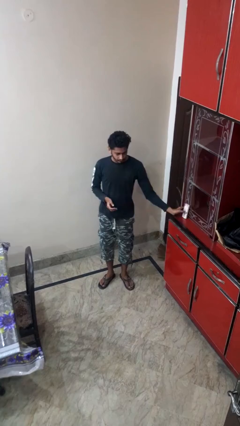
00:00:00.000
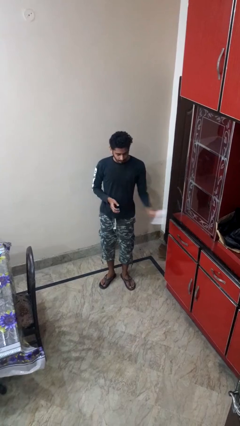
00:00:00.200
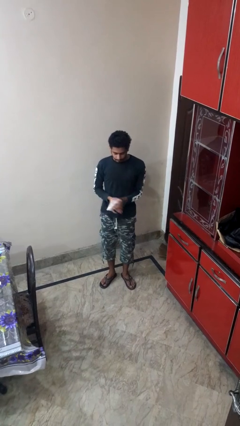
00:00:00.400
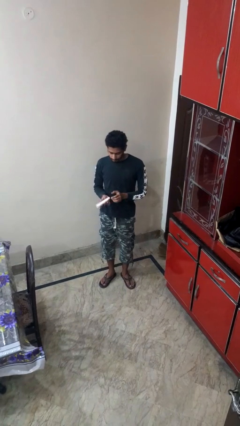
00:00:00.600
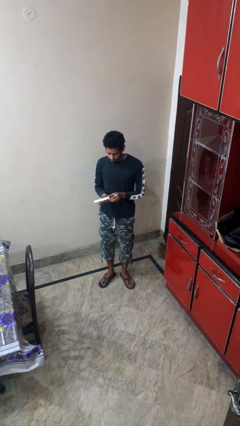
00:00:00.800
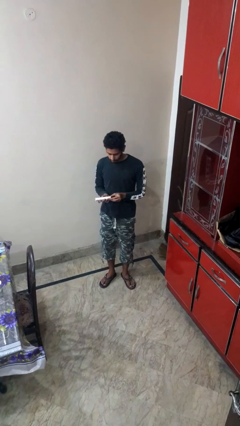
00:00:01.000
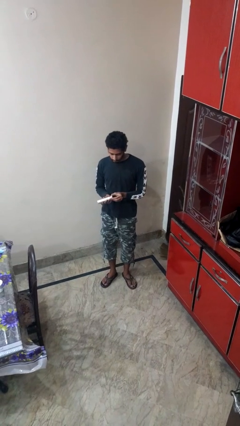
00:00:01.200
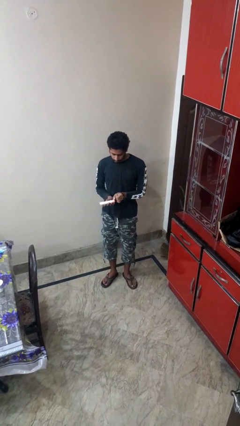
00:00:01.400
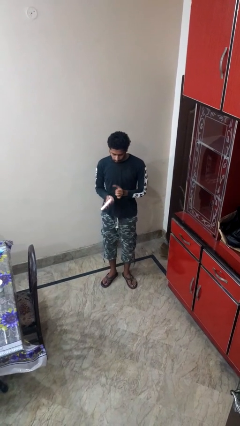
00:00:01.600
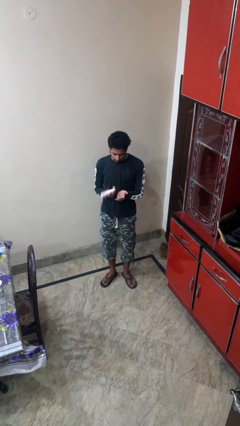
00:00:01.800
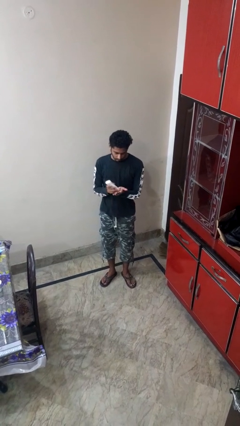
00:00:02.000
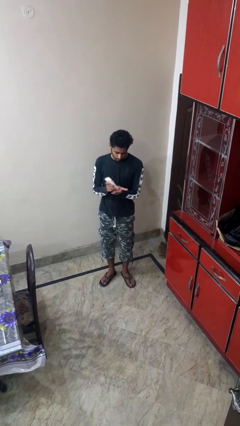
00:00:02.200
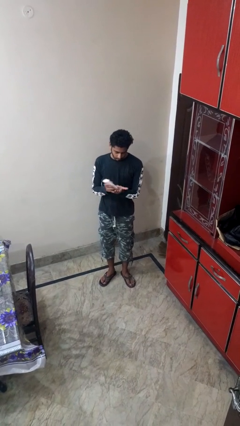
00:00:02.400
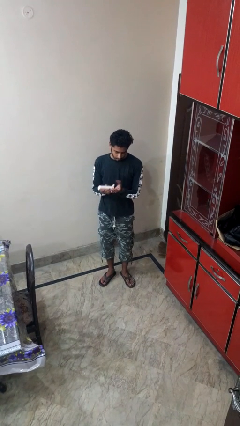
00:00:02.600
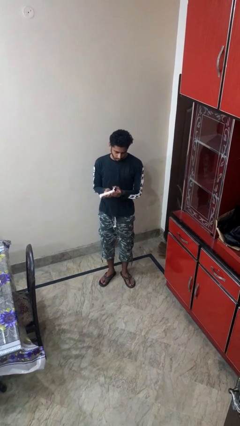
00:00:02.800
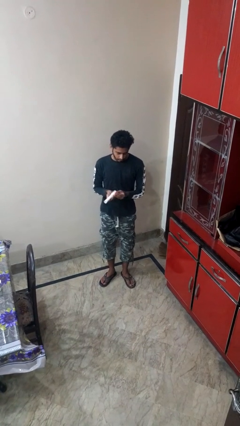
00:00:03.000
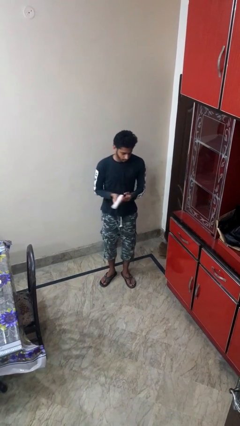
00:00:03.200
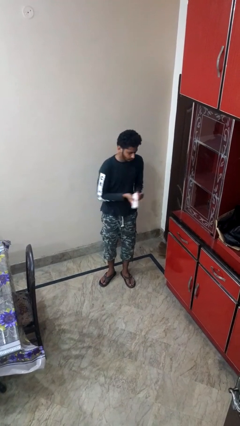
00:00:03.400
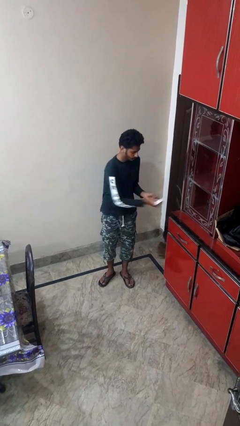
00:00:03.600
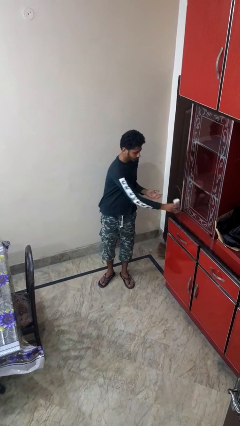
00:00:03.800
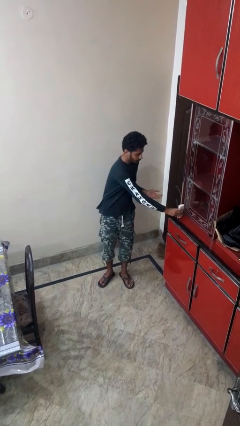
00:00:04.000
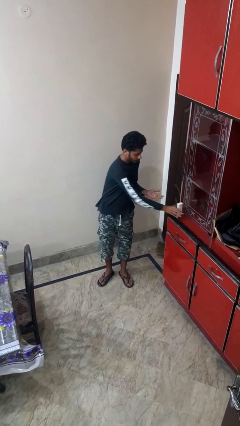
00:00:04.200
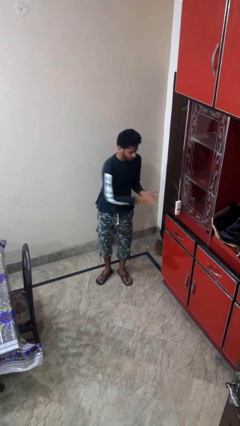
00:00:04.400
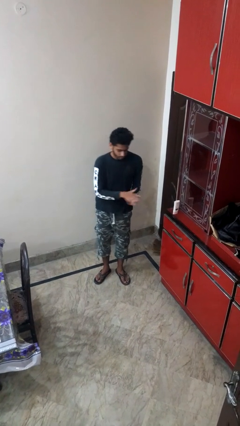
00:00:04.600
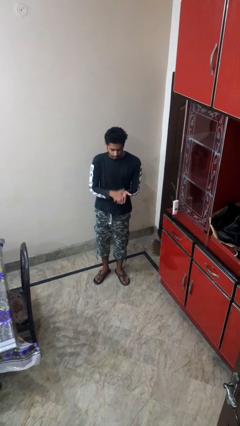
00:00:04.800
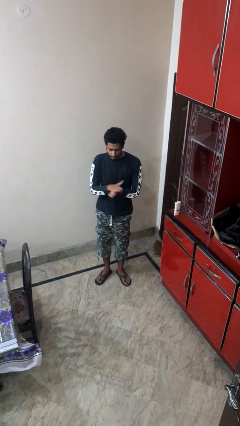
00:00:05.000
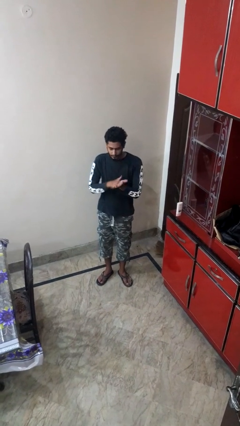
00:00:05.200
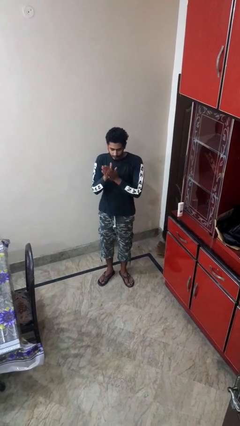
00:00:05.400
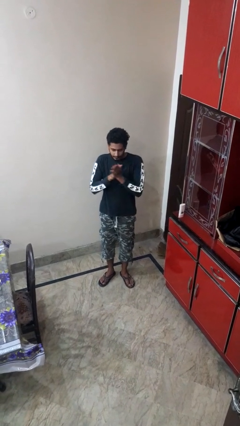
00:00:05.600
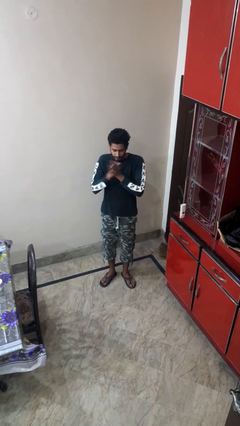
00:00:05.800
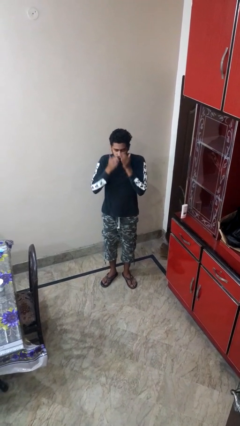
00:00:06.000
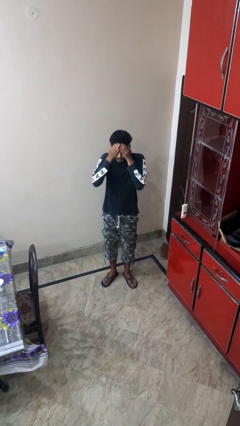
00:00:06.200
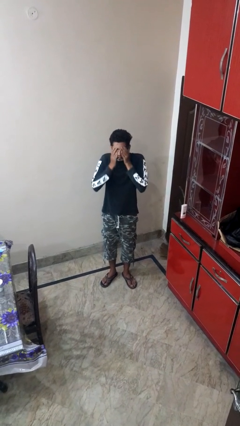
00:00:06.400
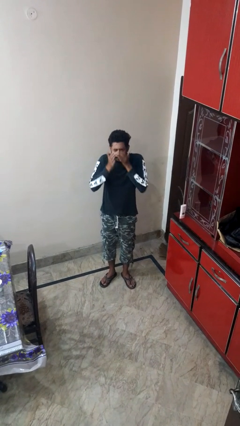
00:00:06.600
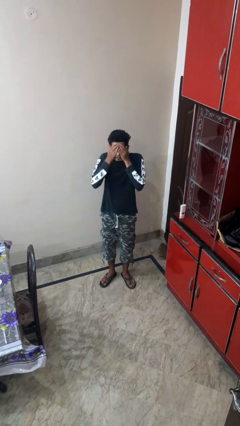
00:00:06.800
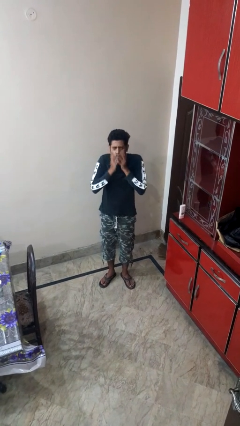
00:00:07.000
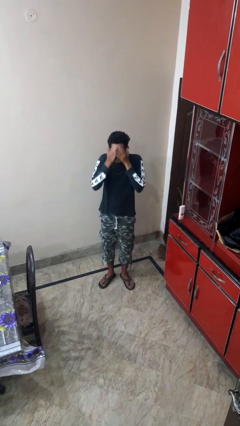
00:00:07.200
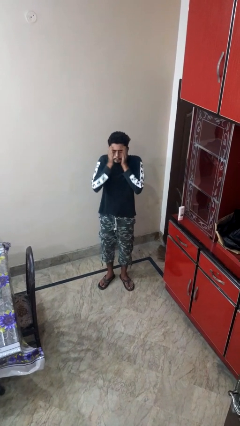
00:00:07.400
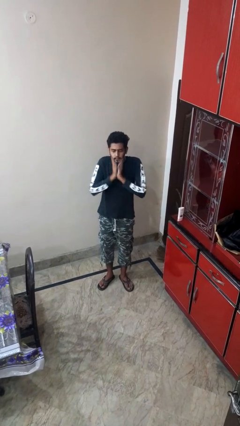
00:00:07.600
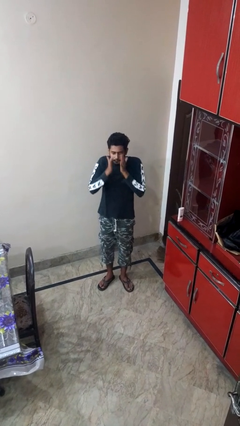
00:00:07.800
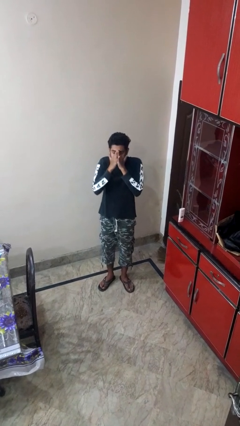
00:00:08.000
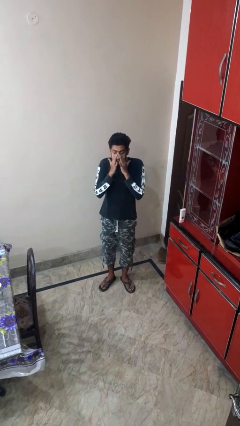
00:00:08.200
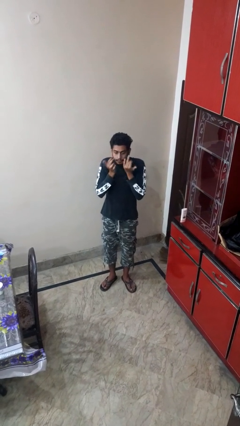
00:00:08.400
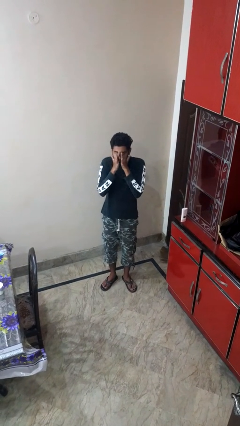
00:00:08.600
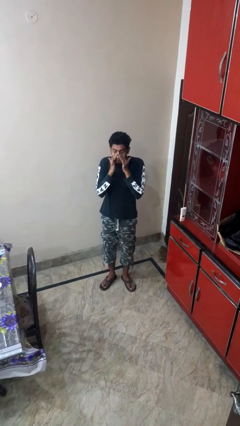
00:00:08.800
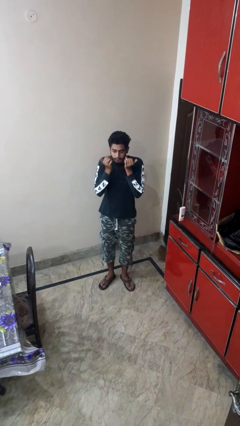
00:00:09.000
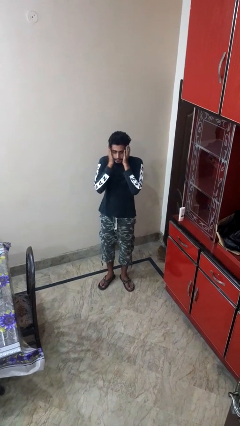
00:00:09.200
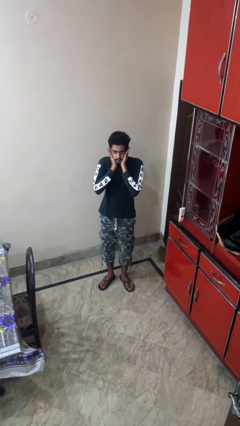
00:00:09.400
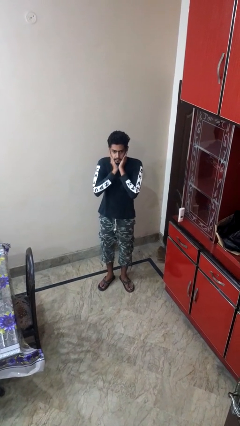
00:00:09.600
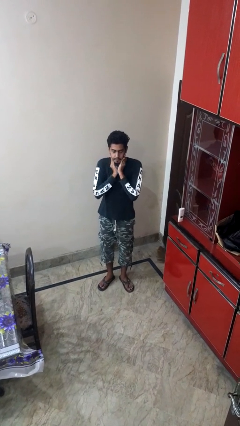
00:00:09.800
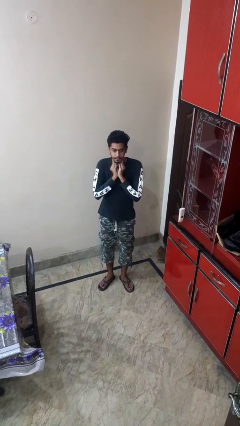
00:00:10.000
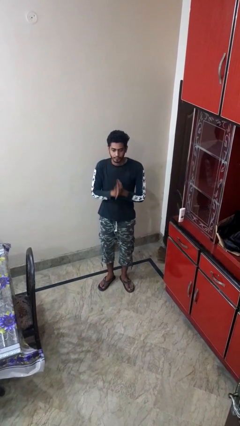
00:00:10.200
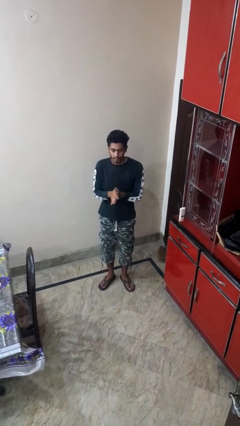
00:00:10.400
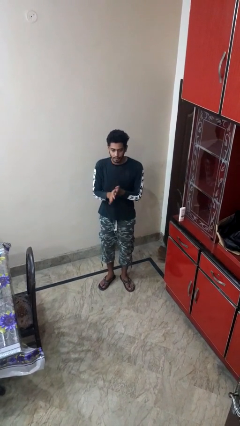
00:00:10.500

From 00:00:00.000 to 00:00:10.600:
person applies facial moisturizer

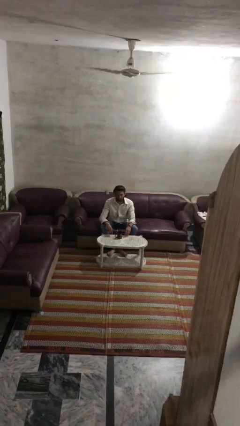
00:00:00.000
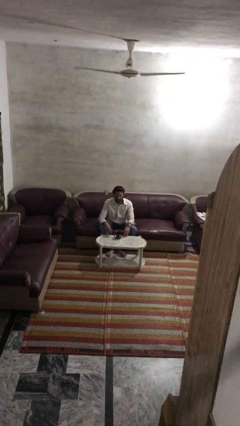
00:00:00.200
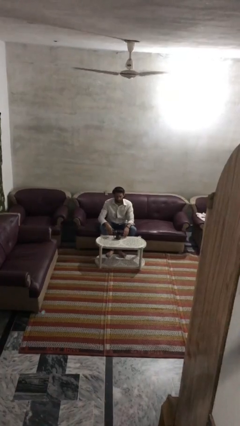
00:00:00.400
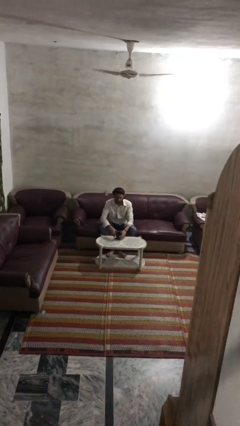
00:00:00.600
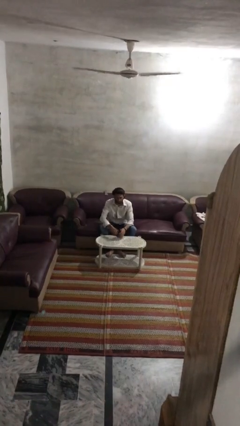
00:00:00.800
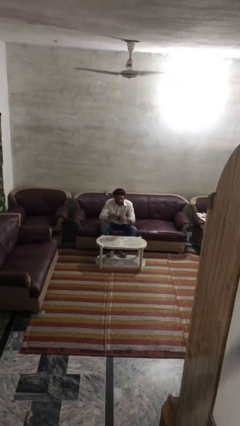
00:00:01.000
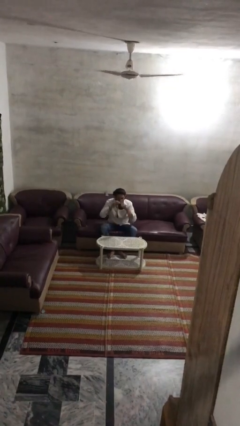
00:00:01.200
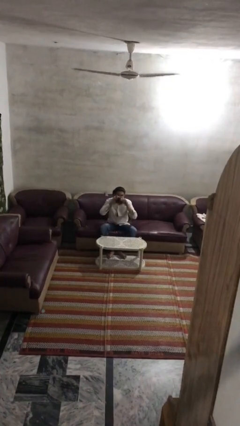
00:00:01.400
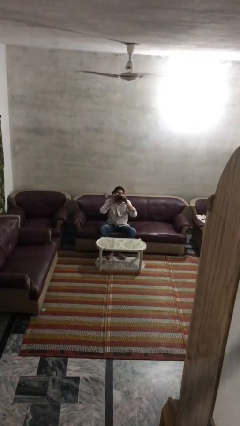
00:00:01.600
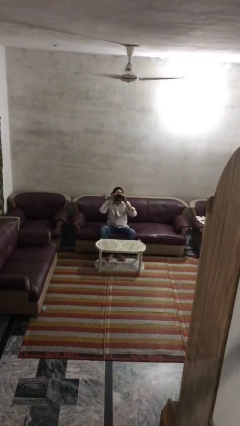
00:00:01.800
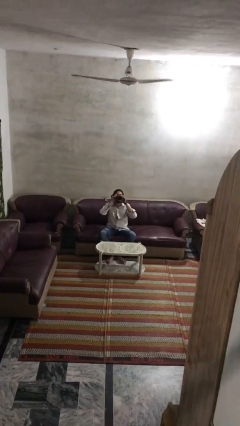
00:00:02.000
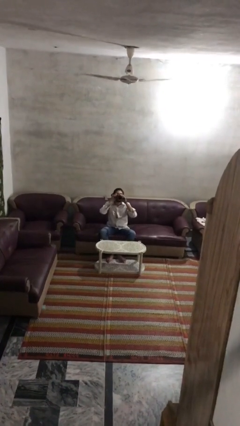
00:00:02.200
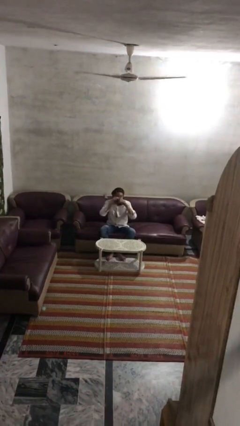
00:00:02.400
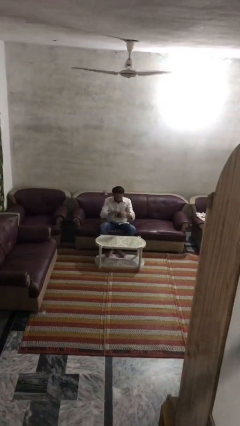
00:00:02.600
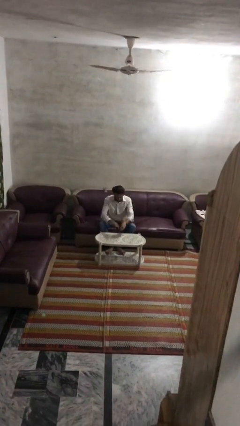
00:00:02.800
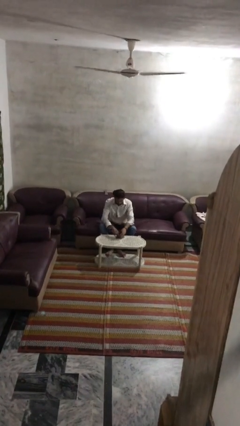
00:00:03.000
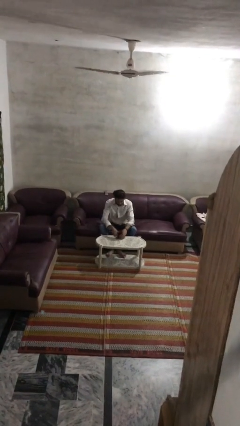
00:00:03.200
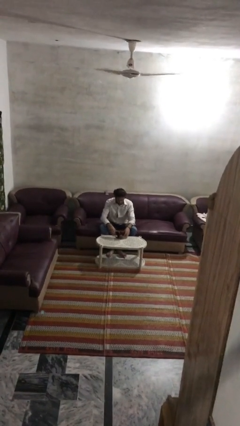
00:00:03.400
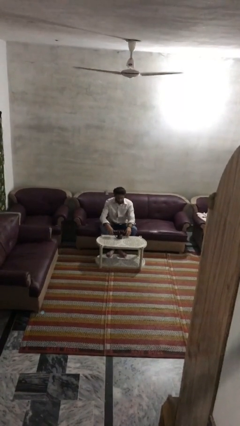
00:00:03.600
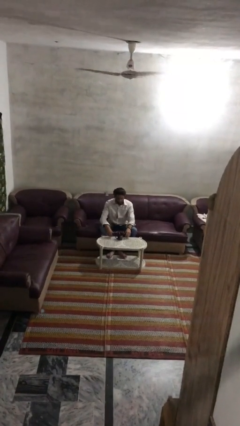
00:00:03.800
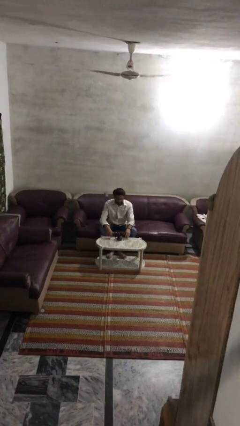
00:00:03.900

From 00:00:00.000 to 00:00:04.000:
person drinks from mug

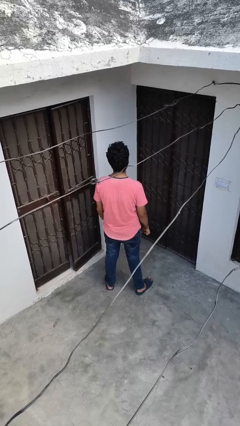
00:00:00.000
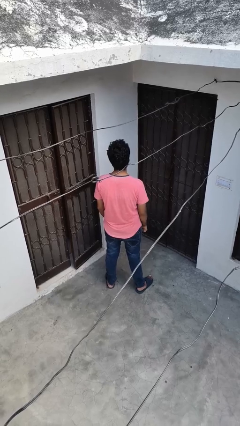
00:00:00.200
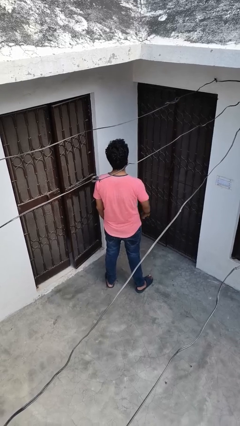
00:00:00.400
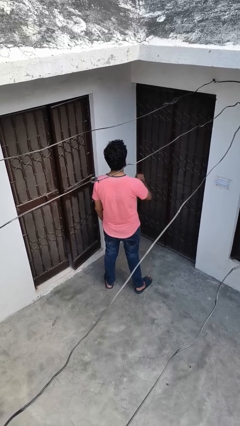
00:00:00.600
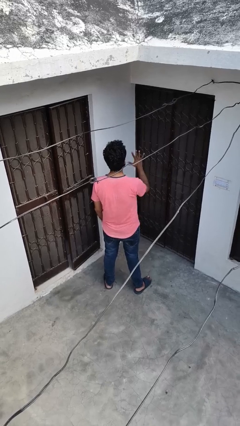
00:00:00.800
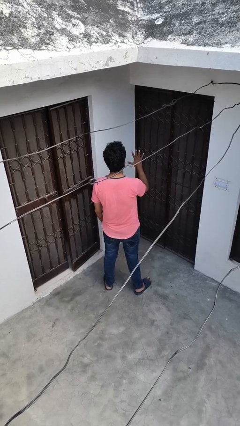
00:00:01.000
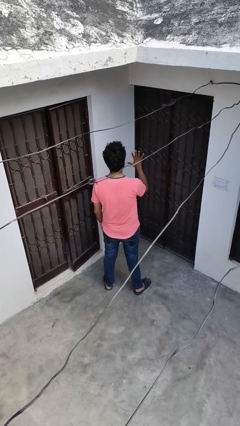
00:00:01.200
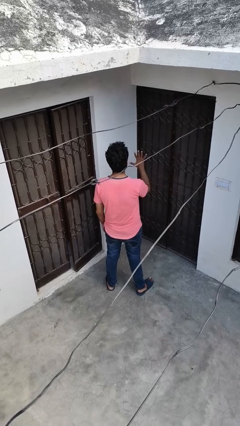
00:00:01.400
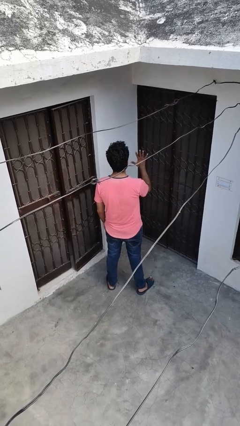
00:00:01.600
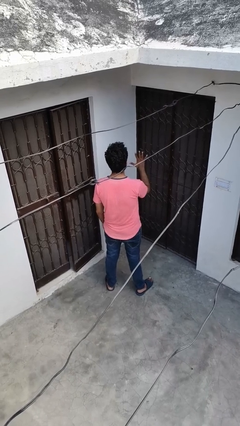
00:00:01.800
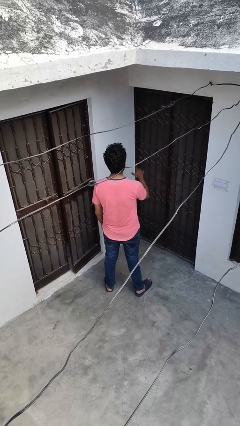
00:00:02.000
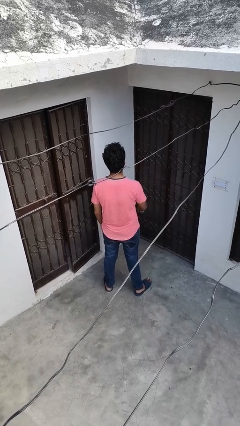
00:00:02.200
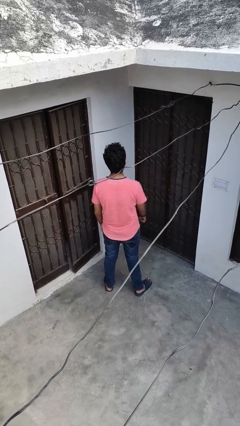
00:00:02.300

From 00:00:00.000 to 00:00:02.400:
person gestures number five

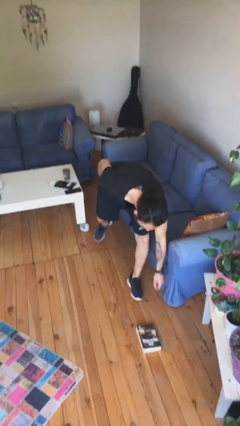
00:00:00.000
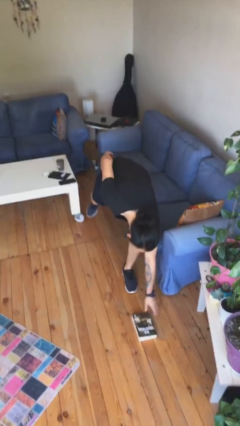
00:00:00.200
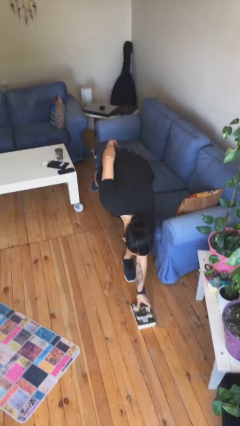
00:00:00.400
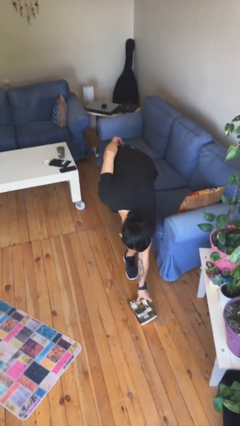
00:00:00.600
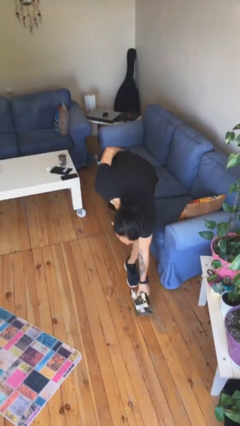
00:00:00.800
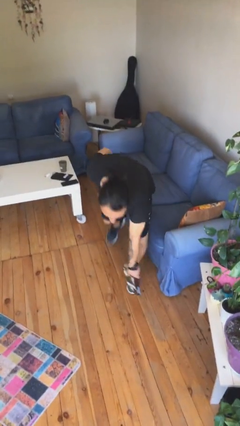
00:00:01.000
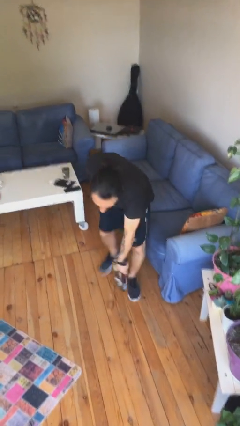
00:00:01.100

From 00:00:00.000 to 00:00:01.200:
person picks up object from floor
